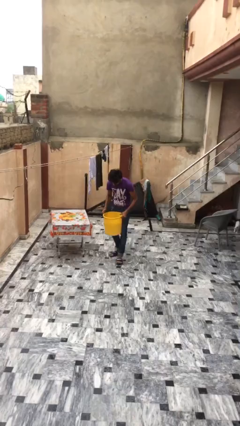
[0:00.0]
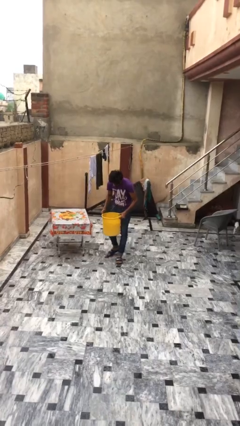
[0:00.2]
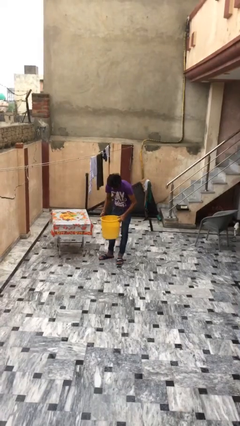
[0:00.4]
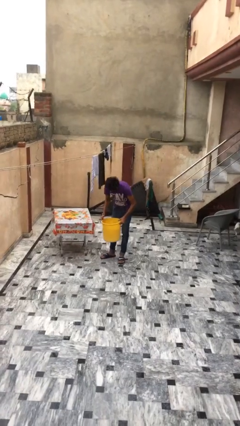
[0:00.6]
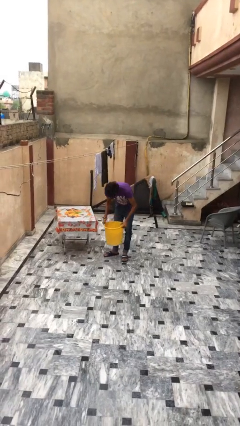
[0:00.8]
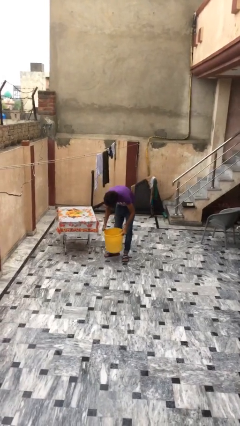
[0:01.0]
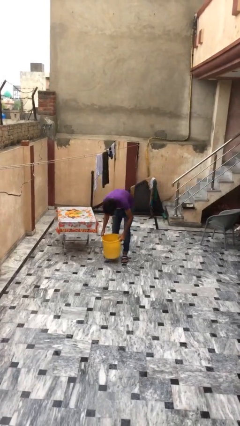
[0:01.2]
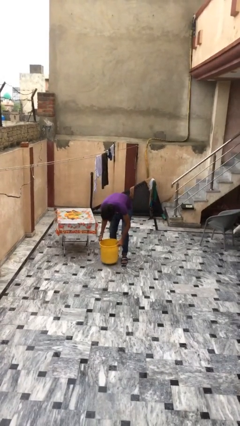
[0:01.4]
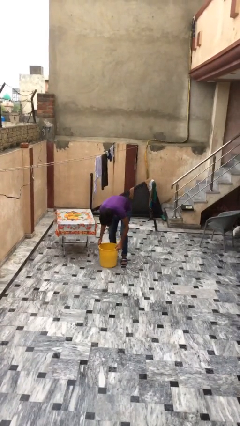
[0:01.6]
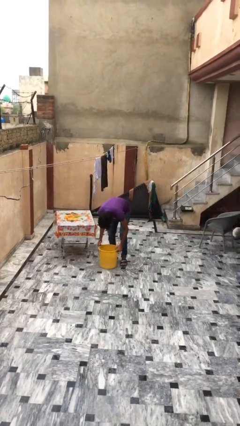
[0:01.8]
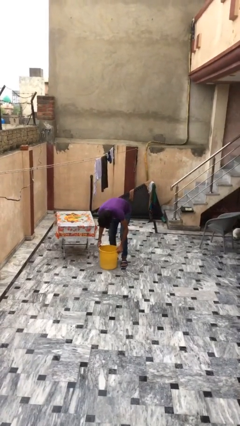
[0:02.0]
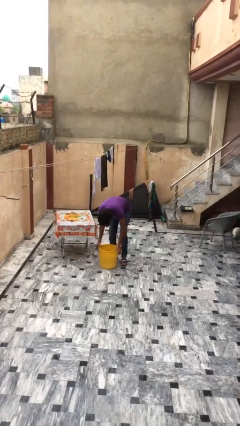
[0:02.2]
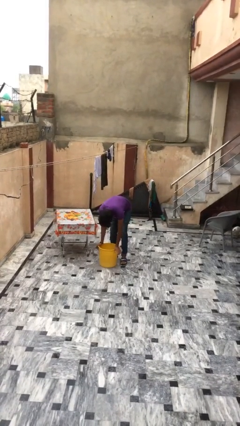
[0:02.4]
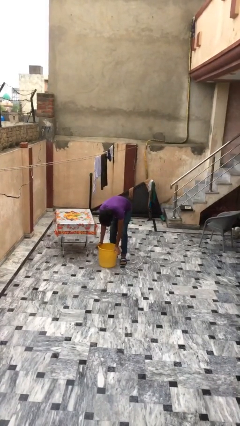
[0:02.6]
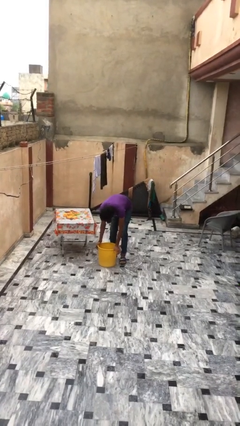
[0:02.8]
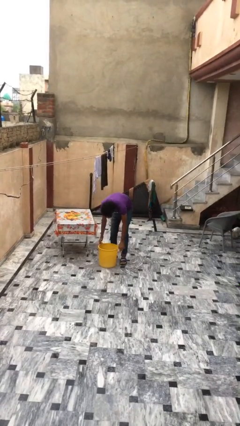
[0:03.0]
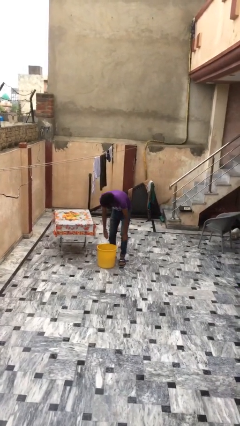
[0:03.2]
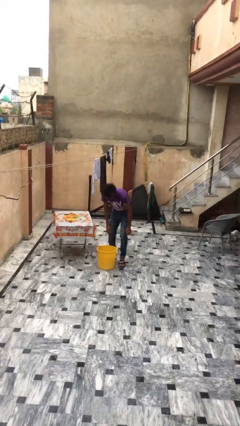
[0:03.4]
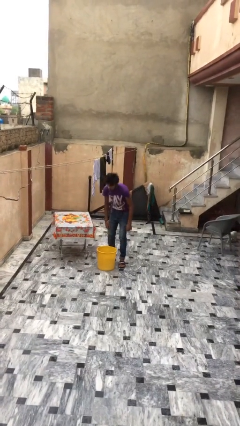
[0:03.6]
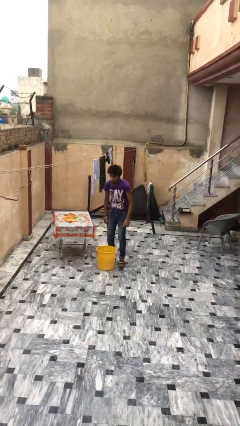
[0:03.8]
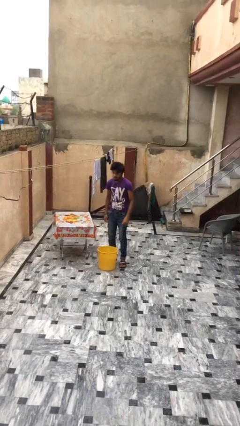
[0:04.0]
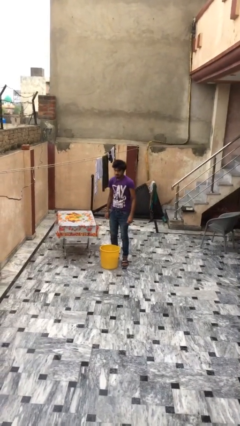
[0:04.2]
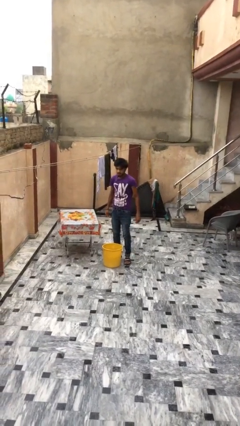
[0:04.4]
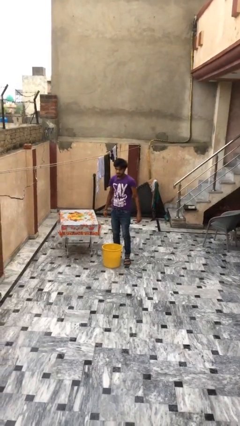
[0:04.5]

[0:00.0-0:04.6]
person puts down object on floor

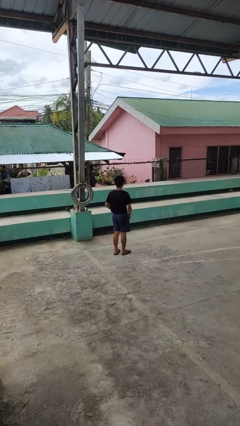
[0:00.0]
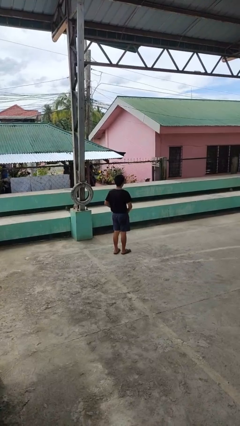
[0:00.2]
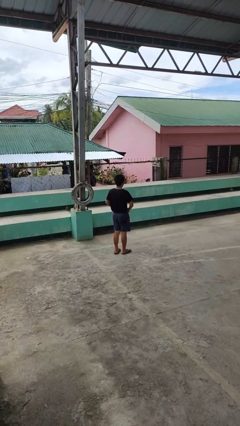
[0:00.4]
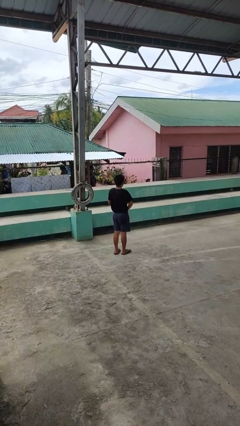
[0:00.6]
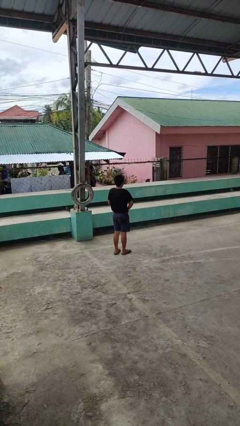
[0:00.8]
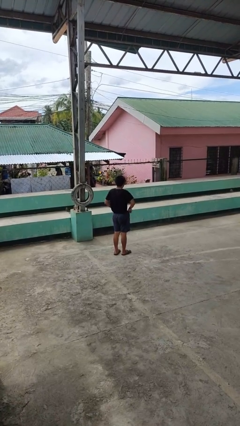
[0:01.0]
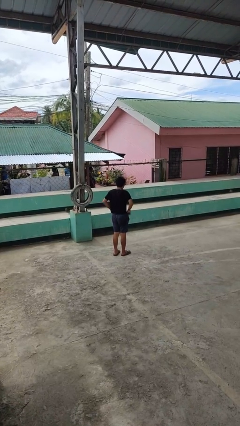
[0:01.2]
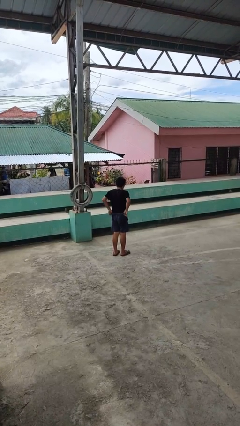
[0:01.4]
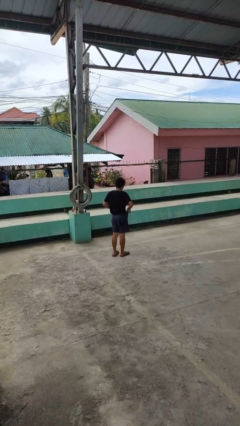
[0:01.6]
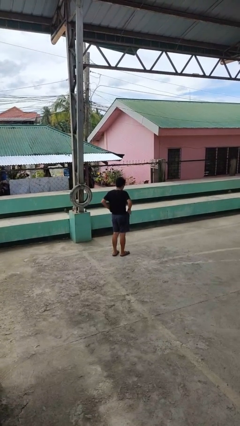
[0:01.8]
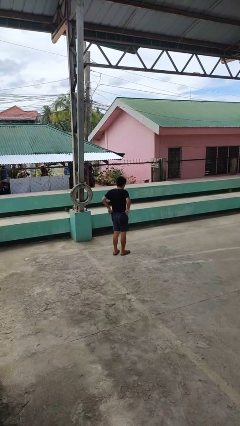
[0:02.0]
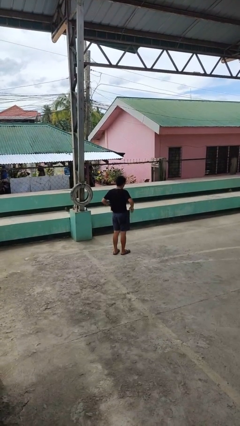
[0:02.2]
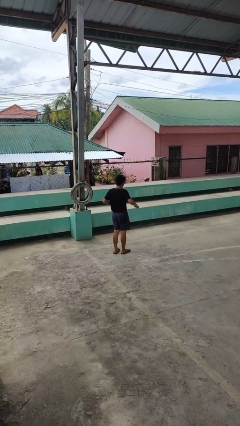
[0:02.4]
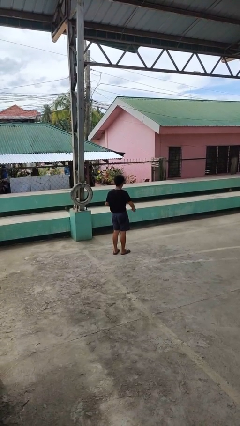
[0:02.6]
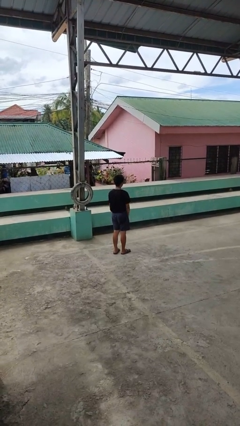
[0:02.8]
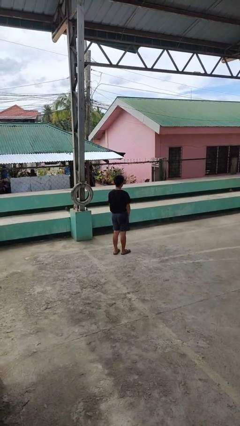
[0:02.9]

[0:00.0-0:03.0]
person hikes up pants

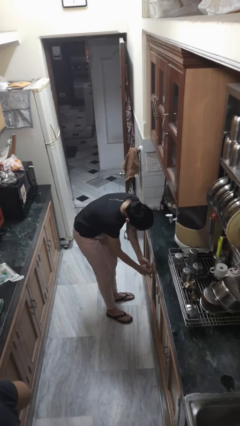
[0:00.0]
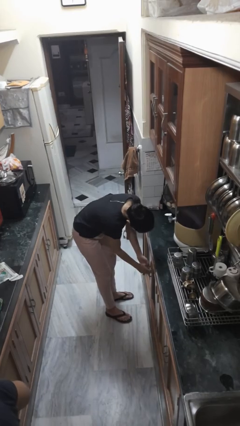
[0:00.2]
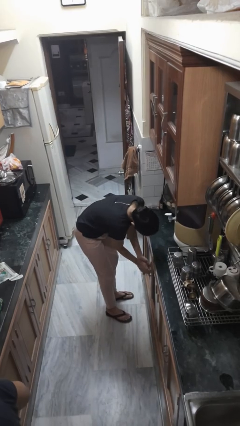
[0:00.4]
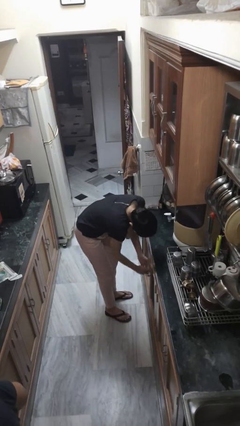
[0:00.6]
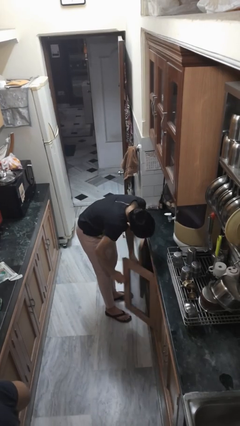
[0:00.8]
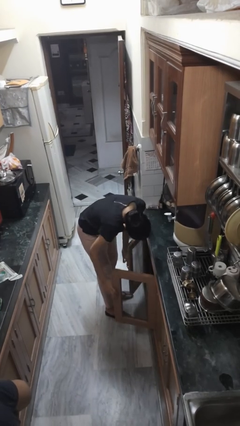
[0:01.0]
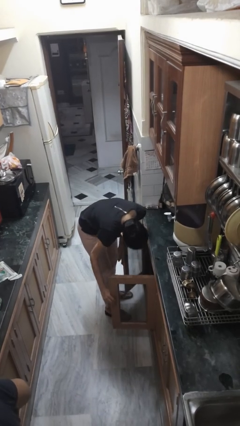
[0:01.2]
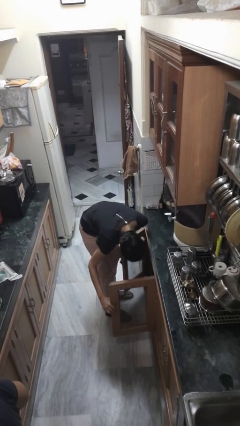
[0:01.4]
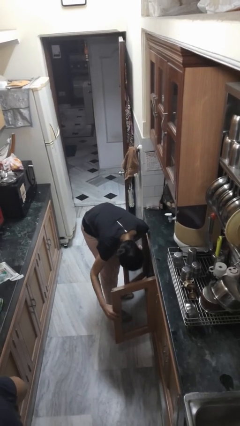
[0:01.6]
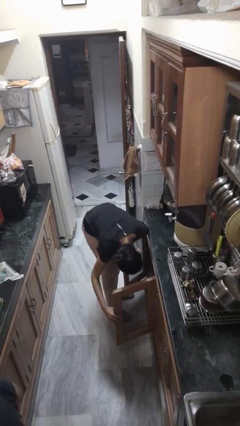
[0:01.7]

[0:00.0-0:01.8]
person opens cabinet

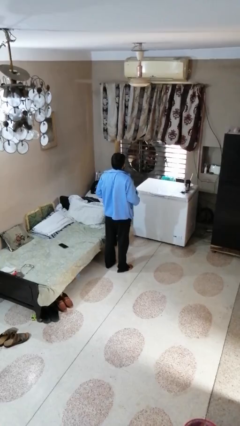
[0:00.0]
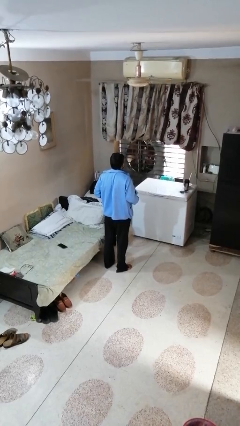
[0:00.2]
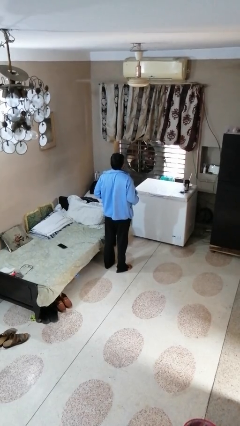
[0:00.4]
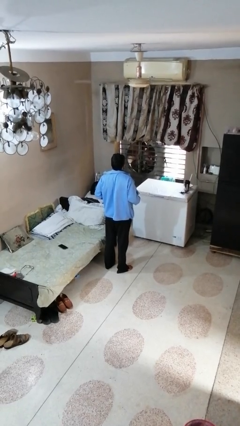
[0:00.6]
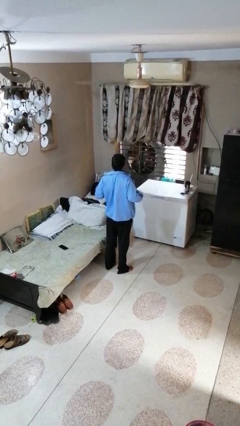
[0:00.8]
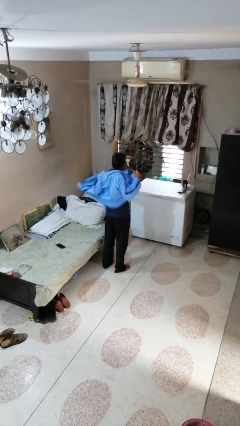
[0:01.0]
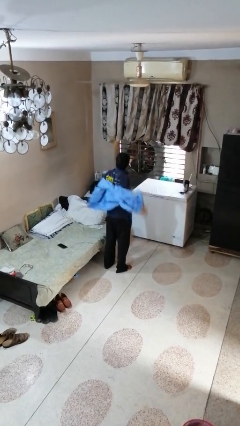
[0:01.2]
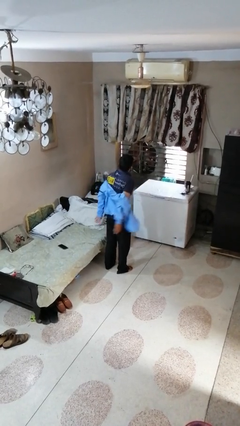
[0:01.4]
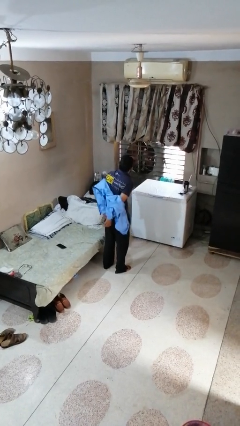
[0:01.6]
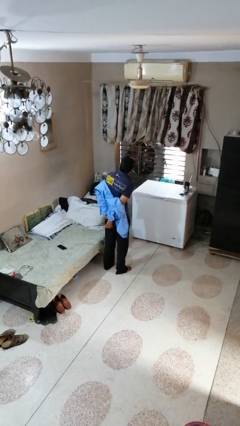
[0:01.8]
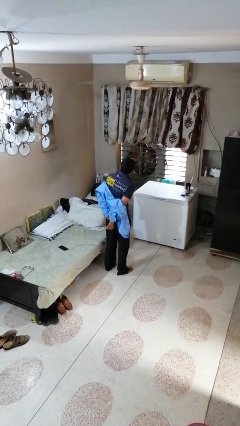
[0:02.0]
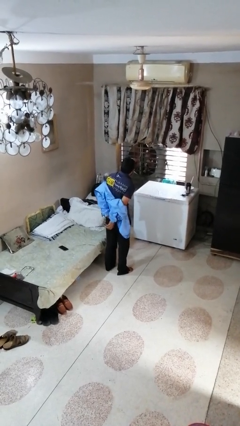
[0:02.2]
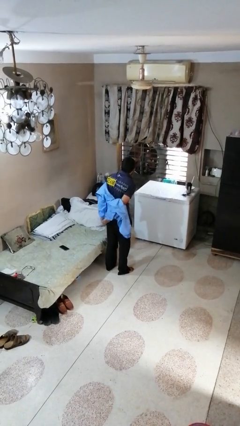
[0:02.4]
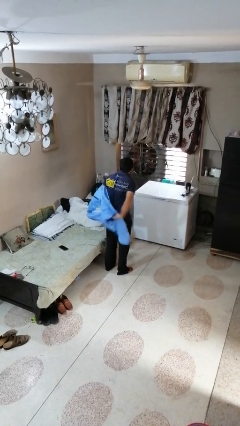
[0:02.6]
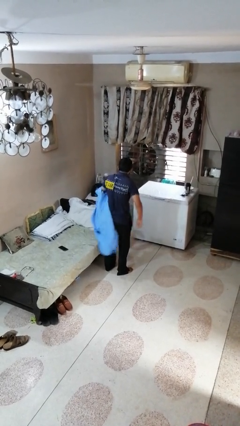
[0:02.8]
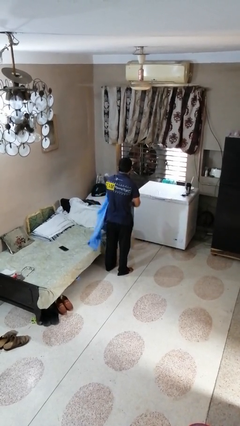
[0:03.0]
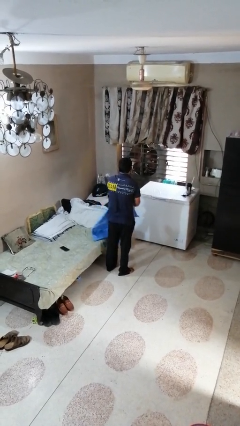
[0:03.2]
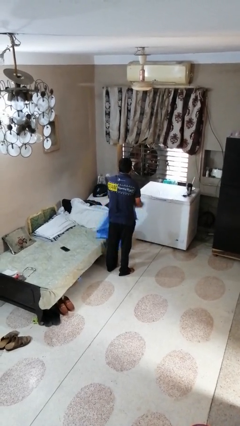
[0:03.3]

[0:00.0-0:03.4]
person takes off jacket

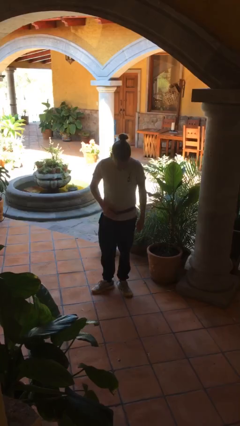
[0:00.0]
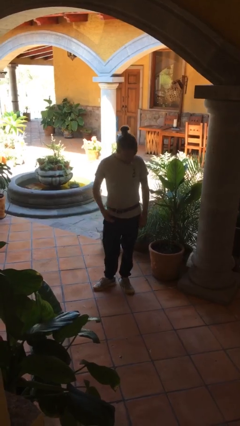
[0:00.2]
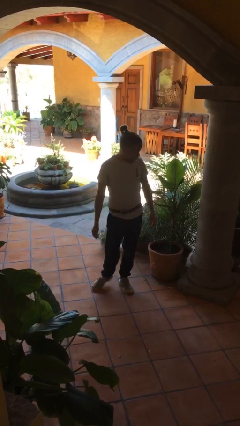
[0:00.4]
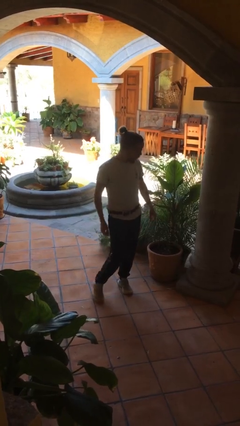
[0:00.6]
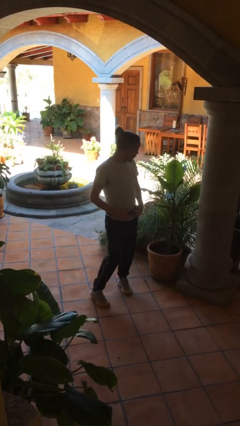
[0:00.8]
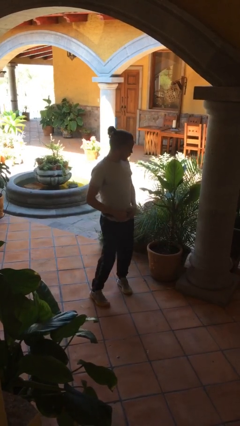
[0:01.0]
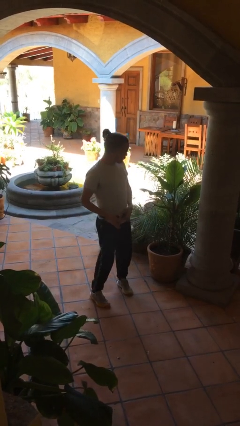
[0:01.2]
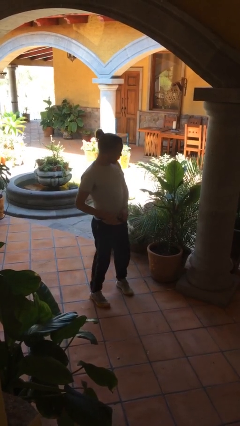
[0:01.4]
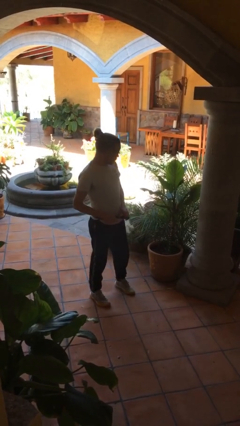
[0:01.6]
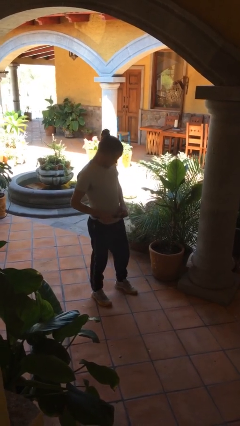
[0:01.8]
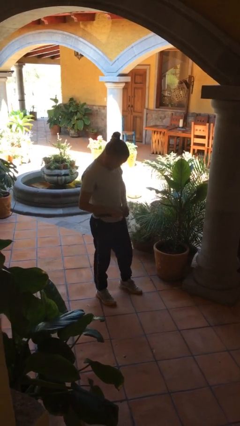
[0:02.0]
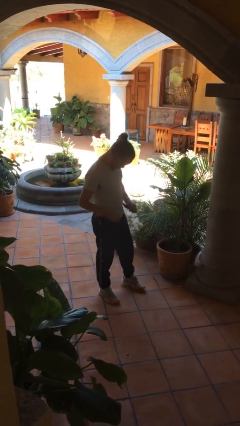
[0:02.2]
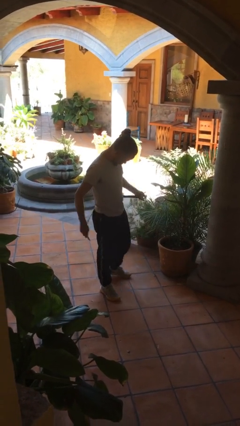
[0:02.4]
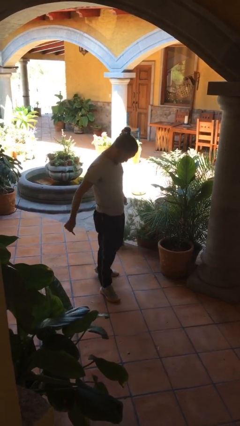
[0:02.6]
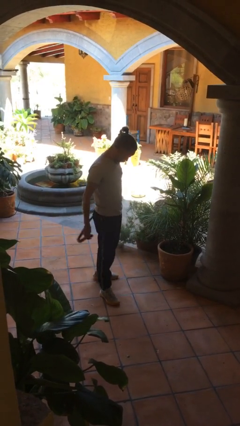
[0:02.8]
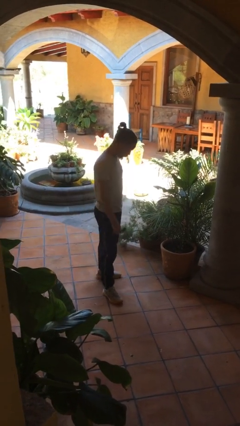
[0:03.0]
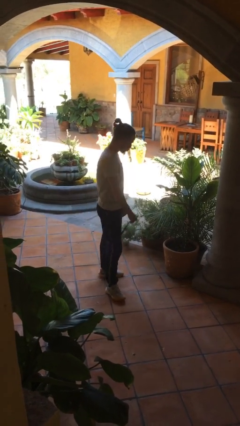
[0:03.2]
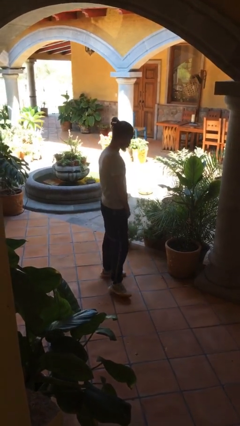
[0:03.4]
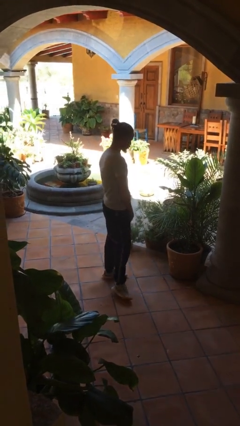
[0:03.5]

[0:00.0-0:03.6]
person takes off belt

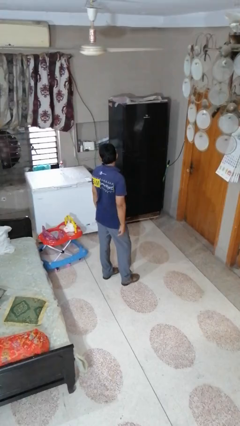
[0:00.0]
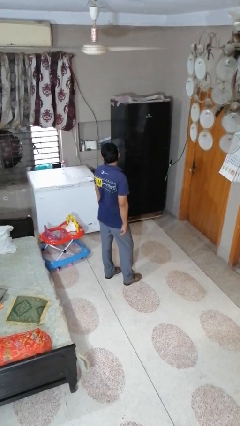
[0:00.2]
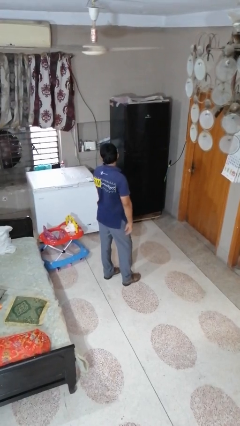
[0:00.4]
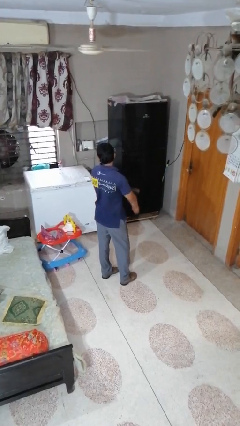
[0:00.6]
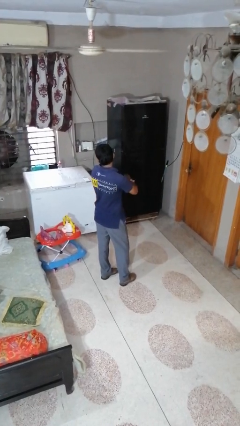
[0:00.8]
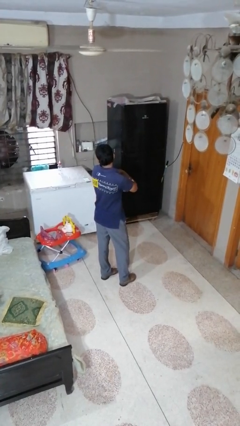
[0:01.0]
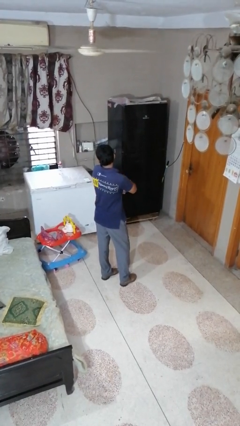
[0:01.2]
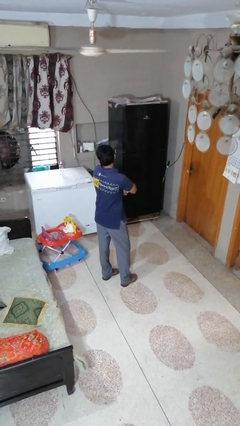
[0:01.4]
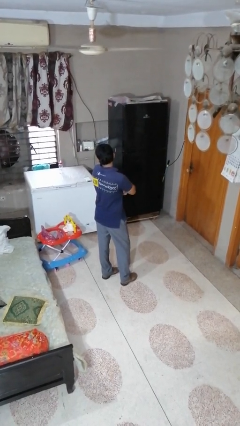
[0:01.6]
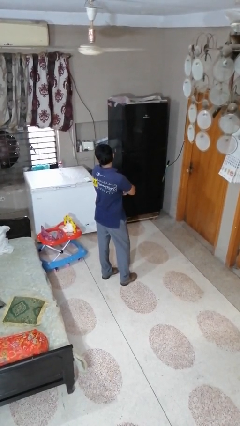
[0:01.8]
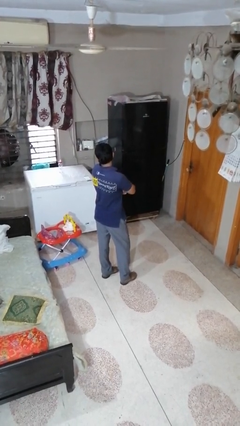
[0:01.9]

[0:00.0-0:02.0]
person crosses arms
